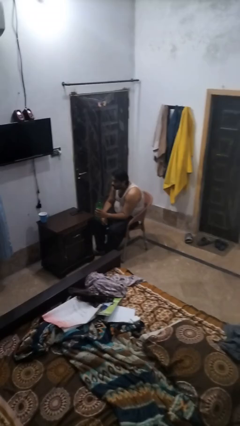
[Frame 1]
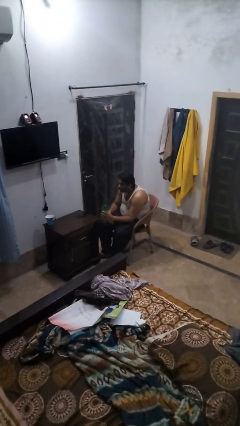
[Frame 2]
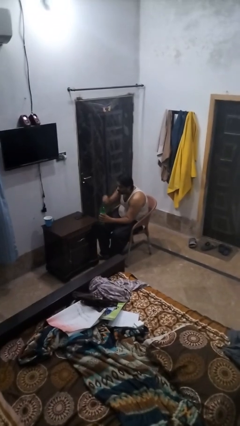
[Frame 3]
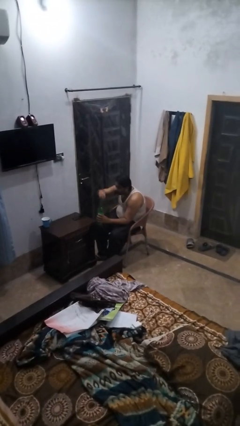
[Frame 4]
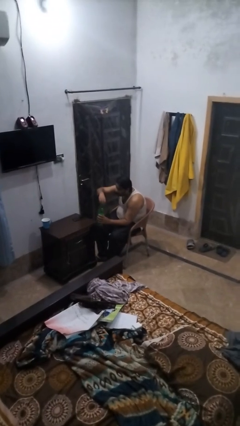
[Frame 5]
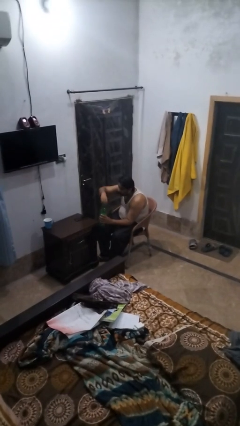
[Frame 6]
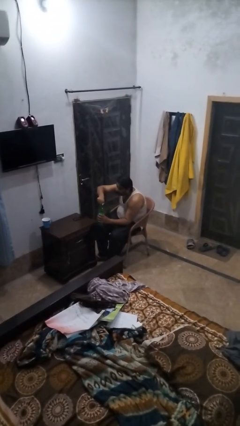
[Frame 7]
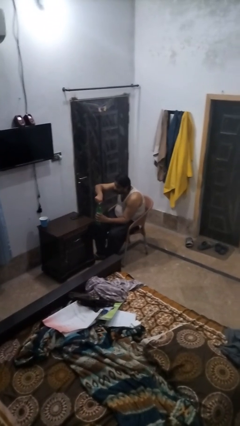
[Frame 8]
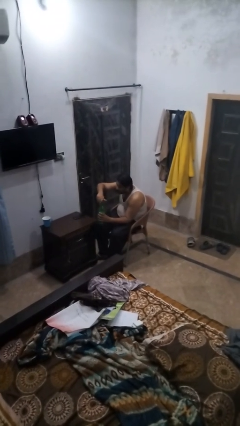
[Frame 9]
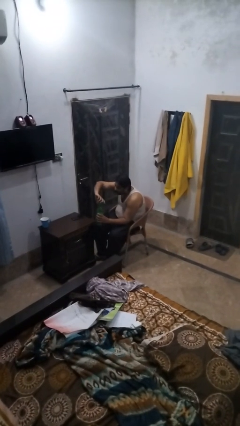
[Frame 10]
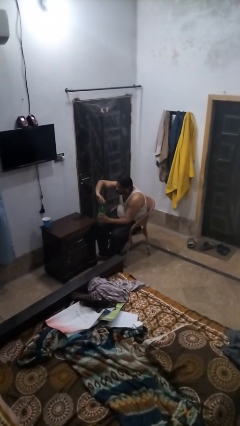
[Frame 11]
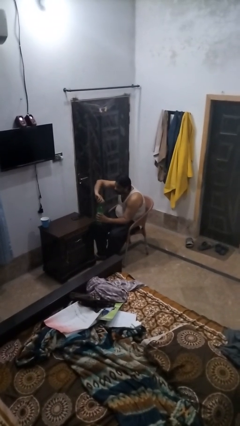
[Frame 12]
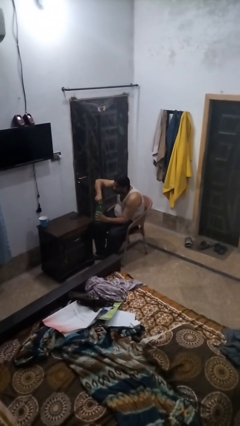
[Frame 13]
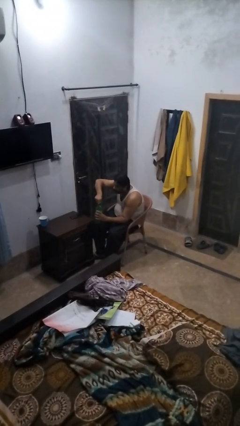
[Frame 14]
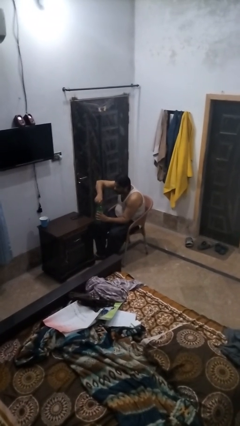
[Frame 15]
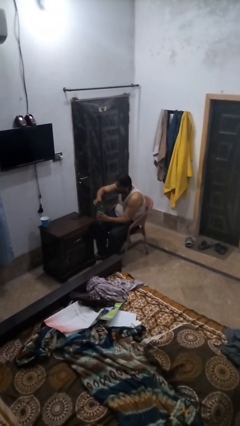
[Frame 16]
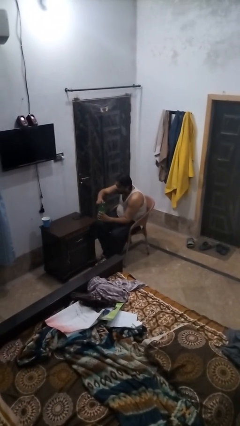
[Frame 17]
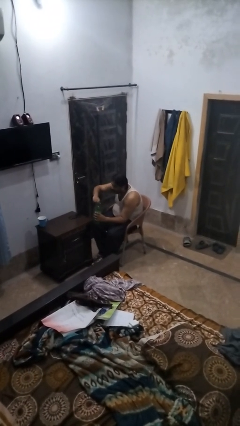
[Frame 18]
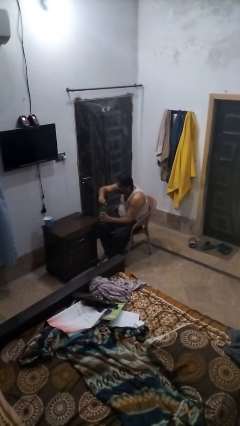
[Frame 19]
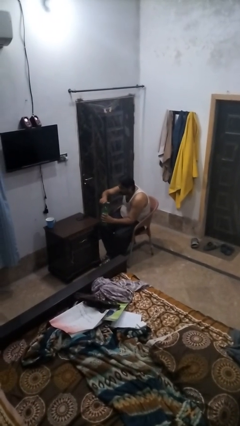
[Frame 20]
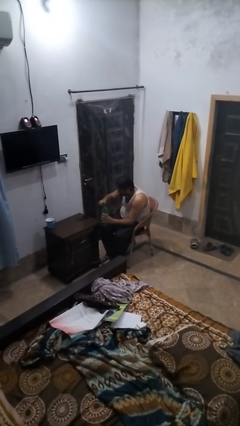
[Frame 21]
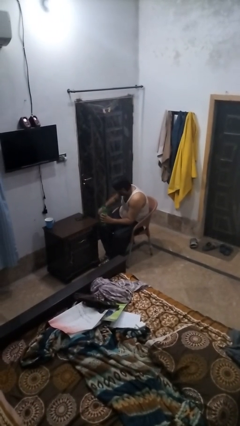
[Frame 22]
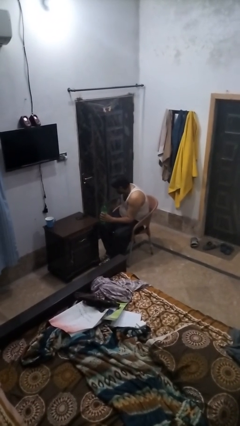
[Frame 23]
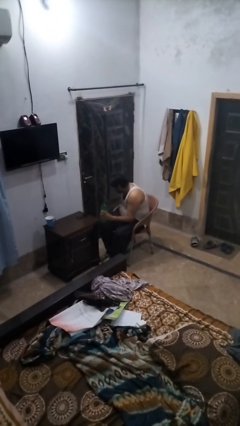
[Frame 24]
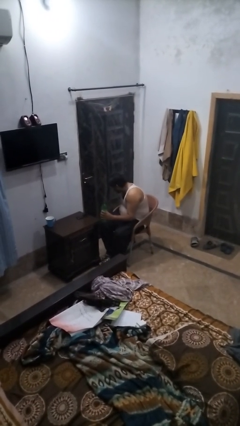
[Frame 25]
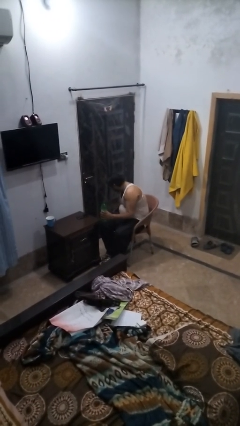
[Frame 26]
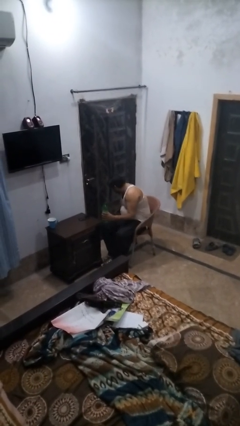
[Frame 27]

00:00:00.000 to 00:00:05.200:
person screws lid to bottle

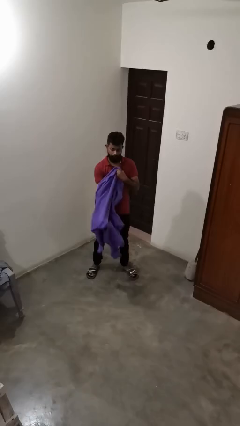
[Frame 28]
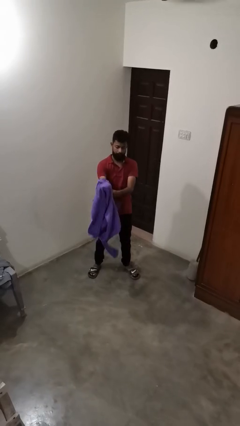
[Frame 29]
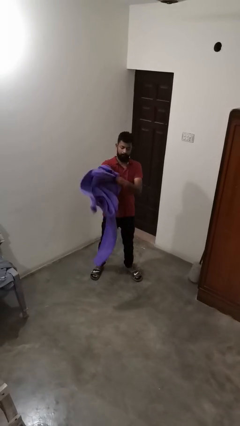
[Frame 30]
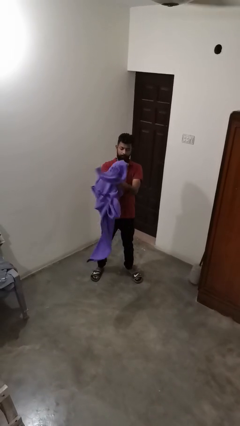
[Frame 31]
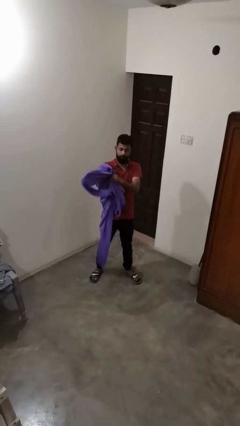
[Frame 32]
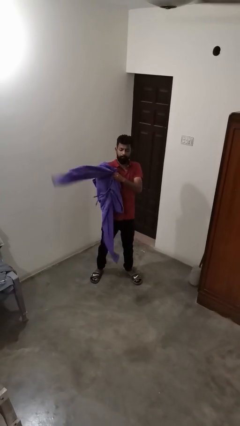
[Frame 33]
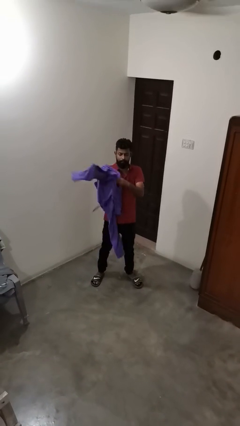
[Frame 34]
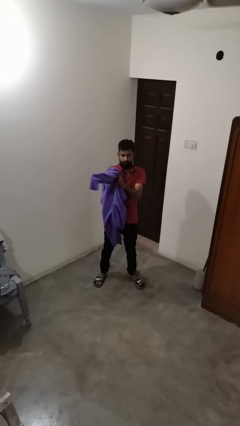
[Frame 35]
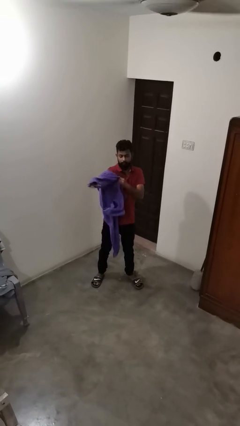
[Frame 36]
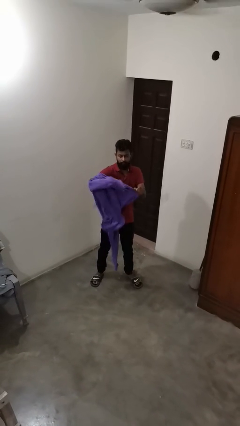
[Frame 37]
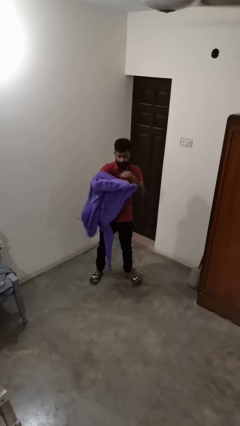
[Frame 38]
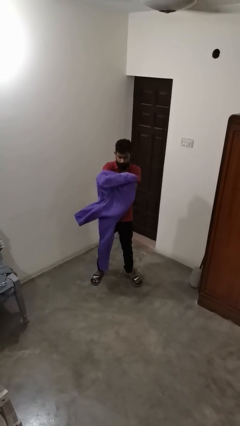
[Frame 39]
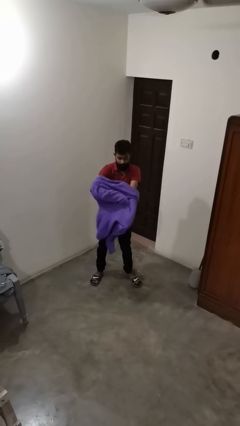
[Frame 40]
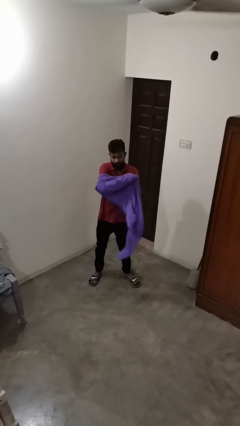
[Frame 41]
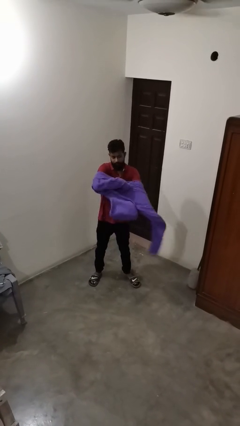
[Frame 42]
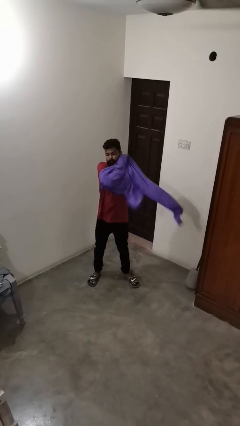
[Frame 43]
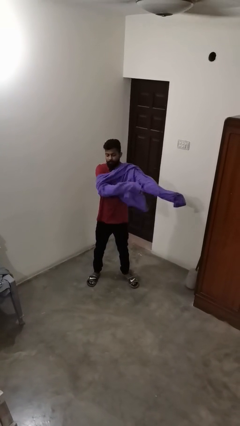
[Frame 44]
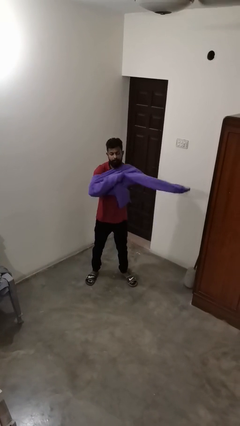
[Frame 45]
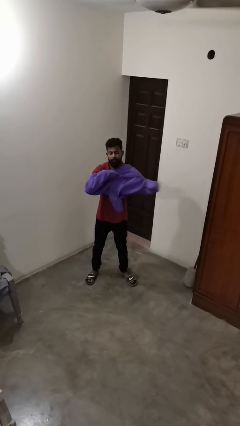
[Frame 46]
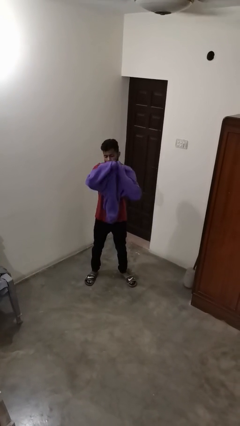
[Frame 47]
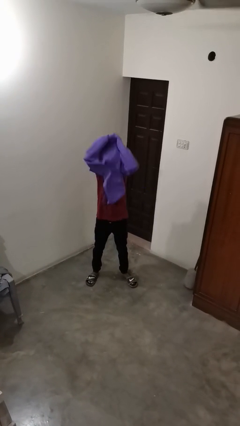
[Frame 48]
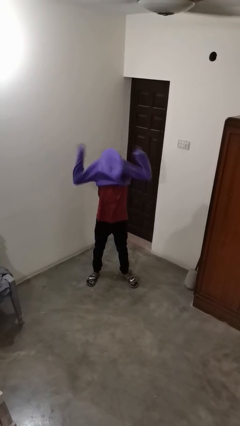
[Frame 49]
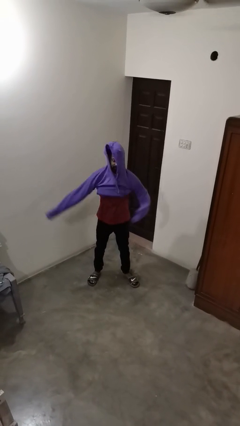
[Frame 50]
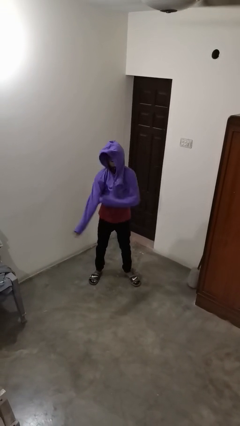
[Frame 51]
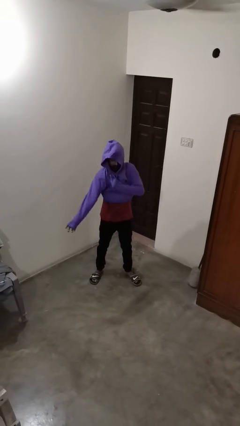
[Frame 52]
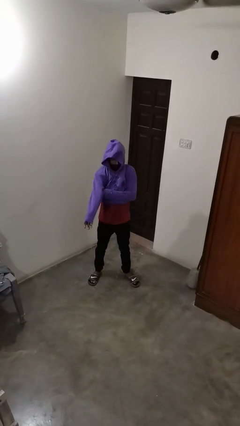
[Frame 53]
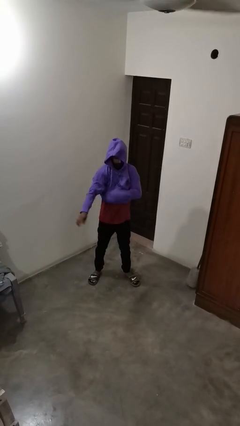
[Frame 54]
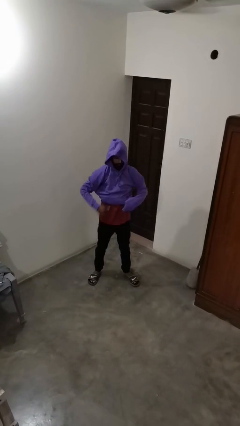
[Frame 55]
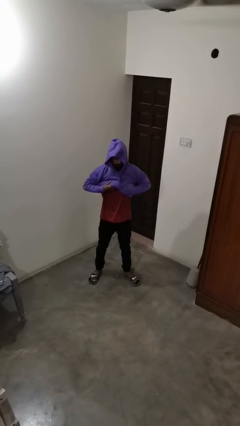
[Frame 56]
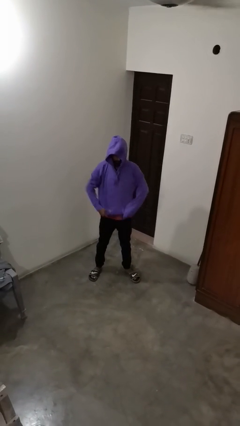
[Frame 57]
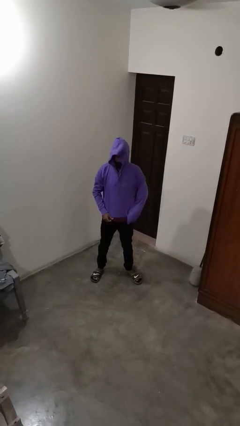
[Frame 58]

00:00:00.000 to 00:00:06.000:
person puts on hoodie

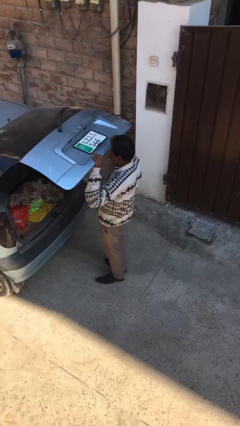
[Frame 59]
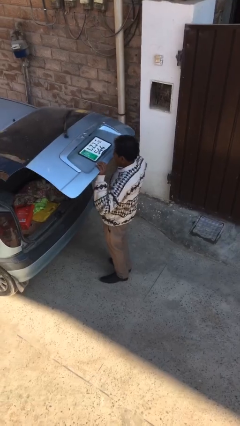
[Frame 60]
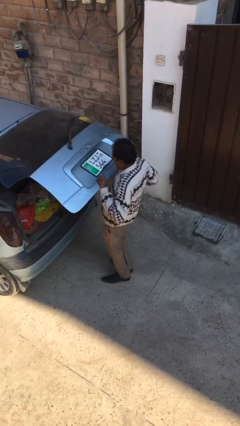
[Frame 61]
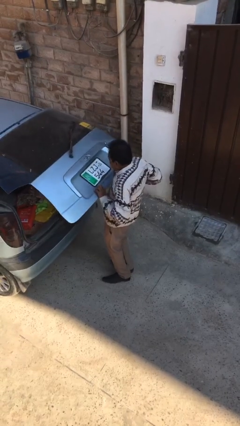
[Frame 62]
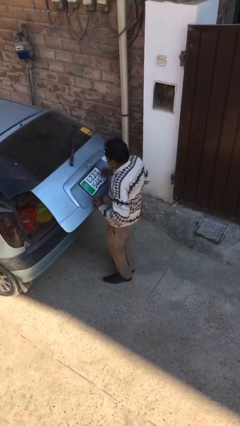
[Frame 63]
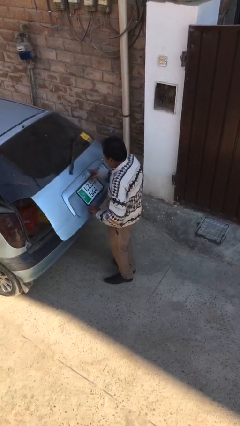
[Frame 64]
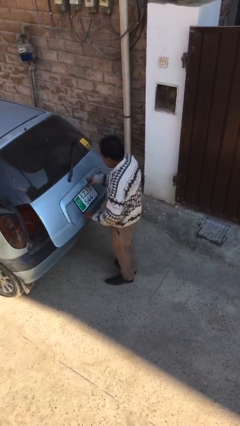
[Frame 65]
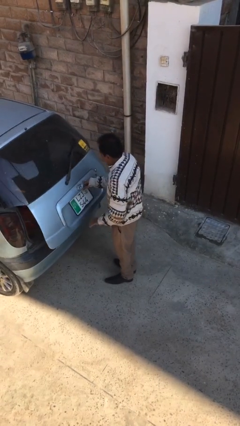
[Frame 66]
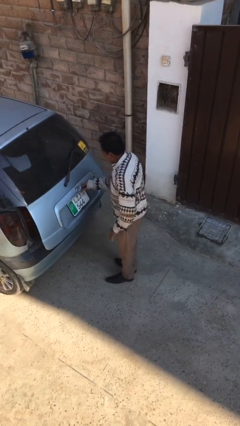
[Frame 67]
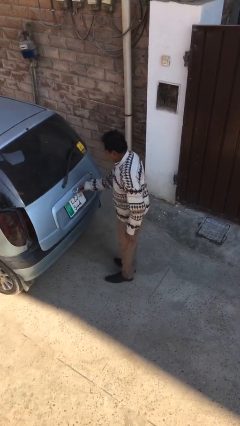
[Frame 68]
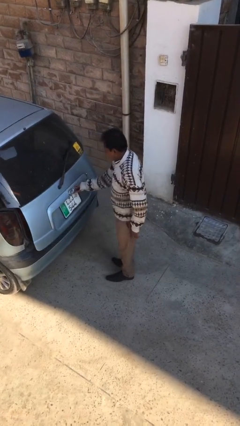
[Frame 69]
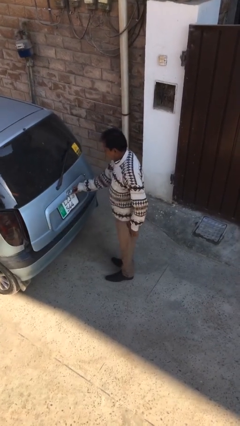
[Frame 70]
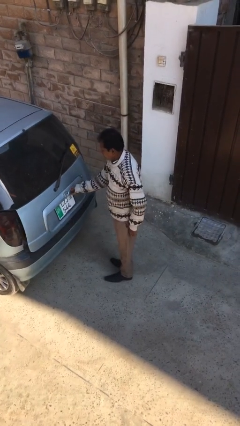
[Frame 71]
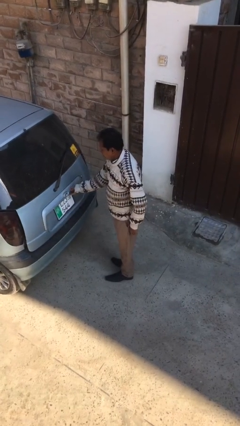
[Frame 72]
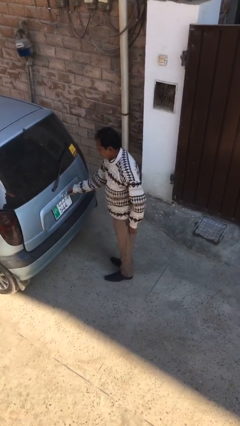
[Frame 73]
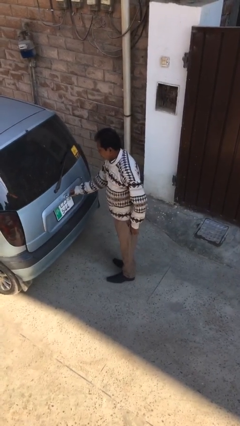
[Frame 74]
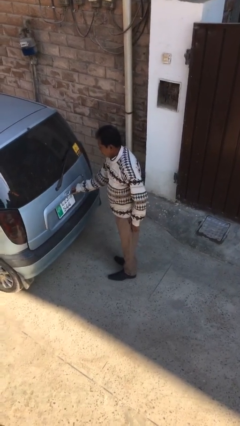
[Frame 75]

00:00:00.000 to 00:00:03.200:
person closes car trunk

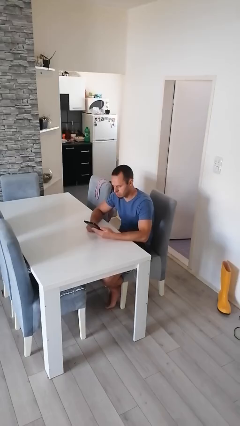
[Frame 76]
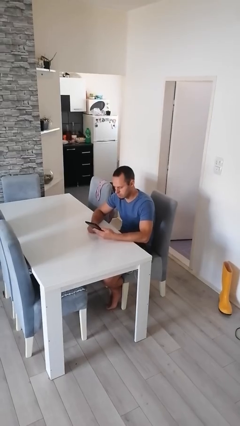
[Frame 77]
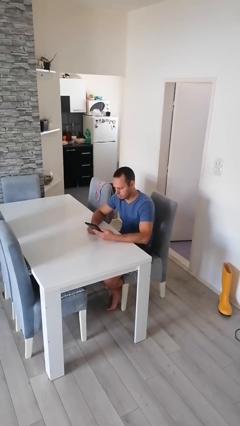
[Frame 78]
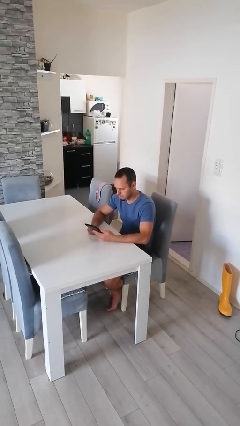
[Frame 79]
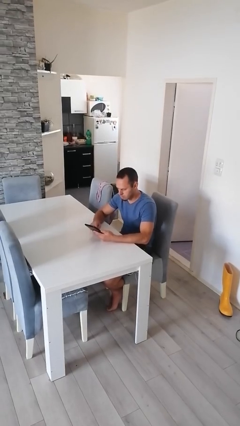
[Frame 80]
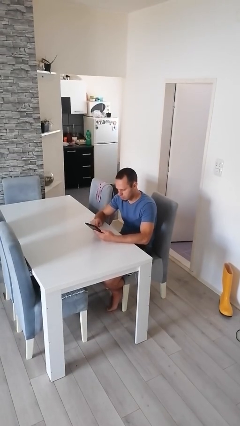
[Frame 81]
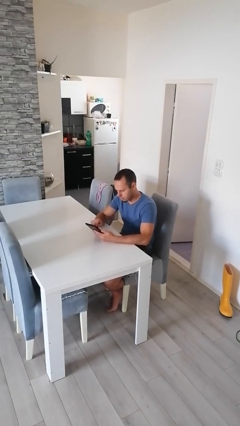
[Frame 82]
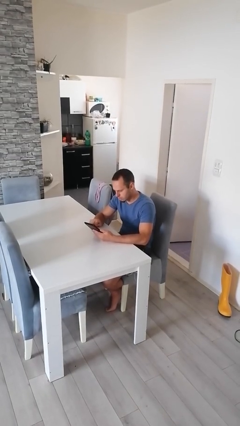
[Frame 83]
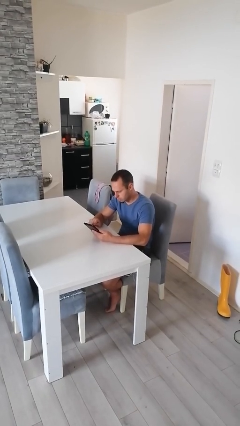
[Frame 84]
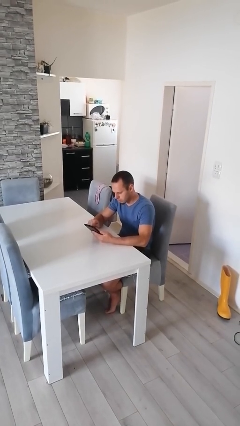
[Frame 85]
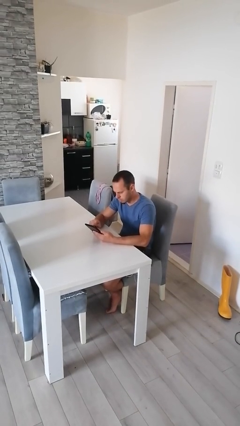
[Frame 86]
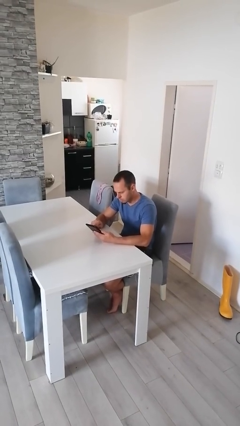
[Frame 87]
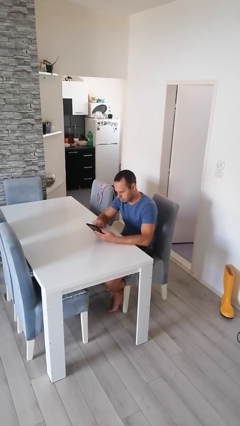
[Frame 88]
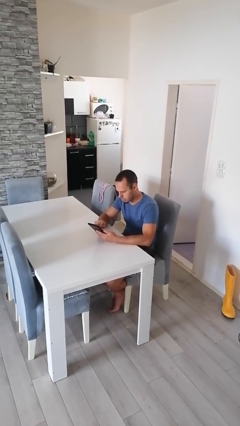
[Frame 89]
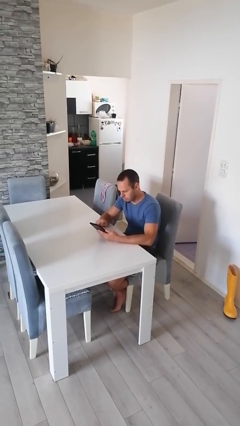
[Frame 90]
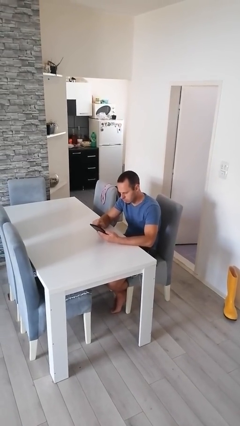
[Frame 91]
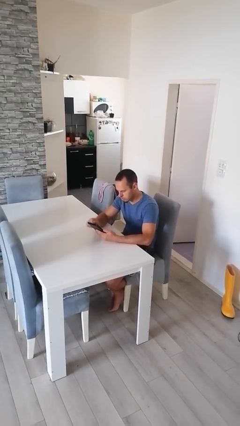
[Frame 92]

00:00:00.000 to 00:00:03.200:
person interacts with tablet
